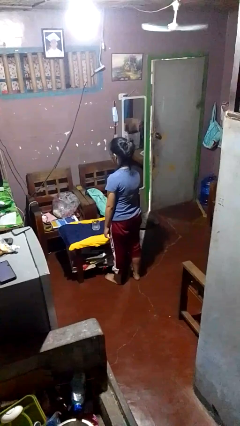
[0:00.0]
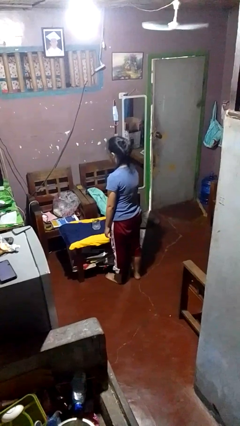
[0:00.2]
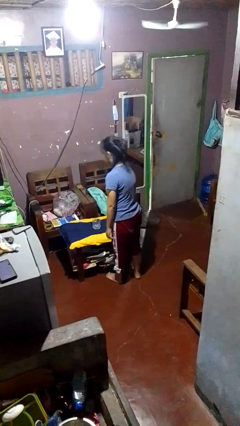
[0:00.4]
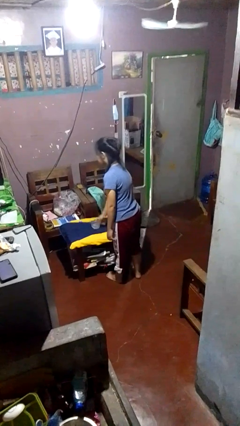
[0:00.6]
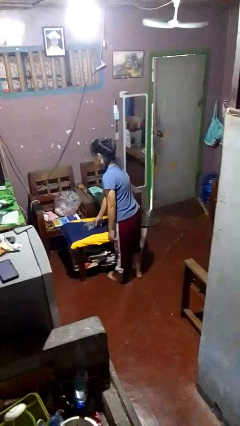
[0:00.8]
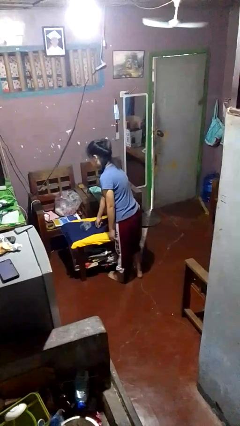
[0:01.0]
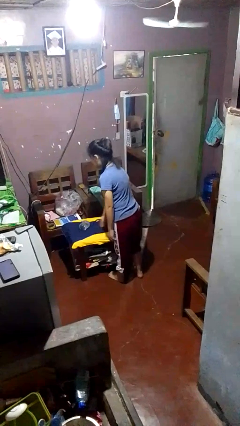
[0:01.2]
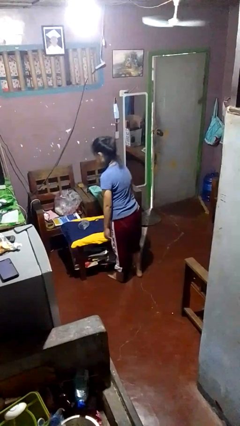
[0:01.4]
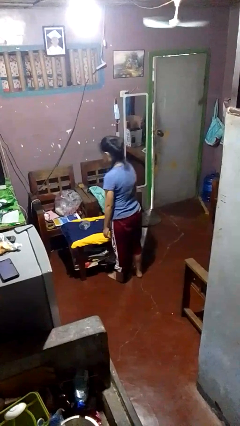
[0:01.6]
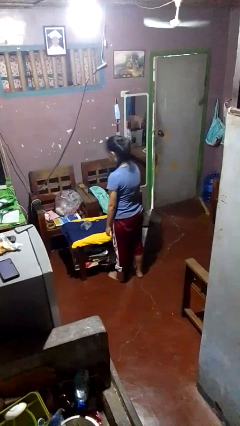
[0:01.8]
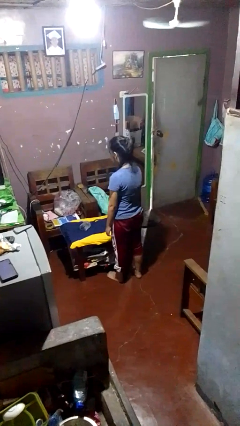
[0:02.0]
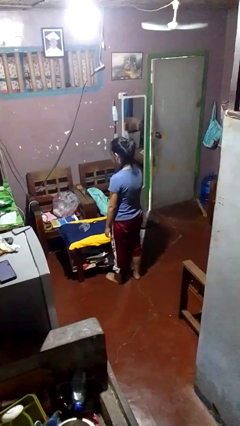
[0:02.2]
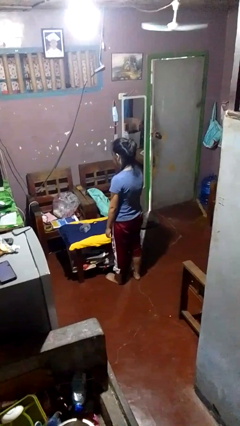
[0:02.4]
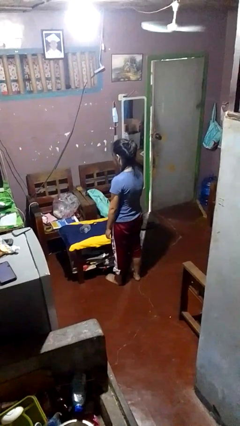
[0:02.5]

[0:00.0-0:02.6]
person knocks over glass

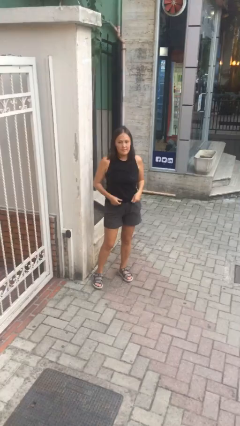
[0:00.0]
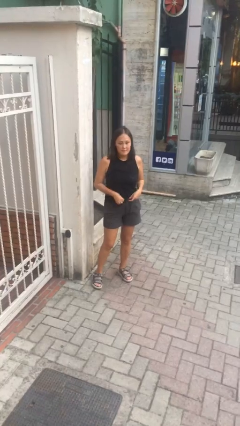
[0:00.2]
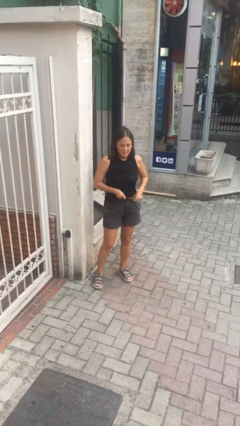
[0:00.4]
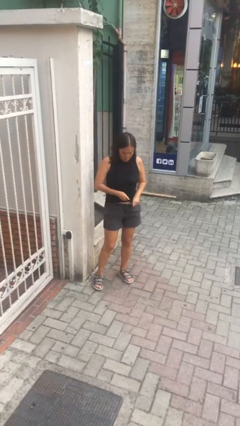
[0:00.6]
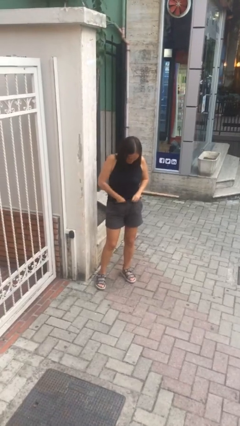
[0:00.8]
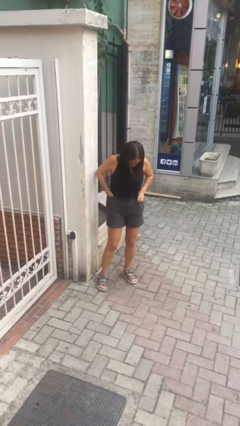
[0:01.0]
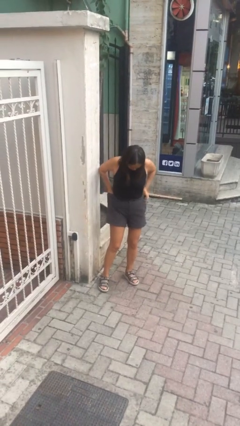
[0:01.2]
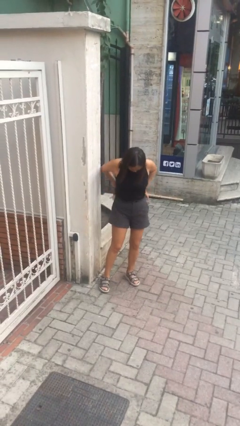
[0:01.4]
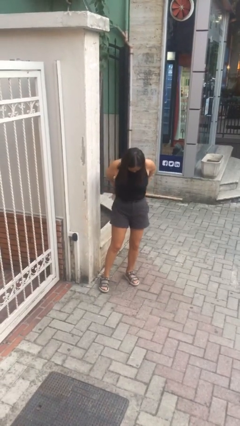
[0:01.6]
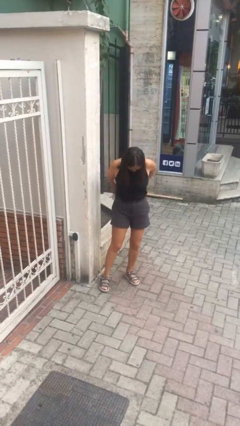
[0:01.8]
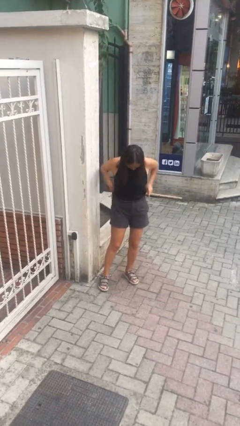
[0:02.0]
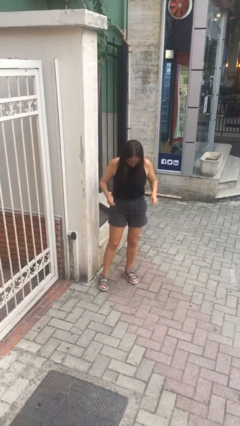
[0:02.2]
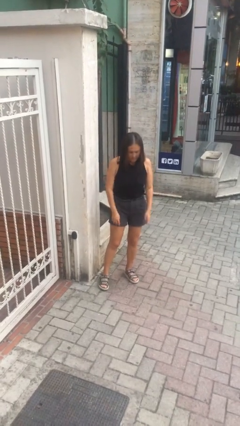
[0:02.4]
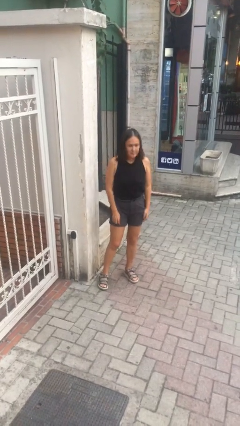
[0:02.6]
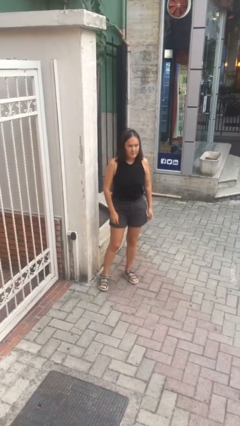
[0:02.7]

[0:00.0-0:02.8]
person tucks in shirt

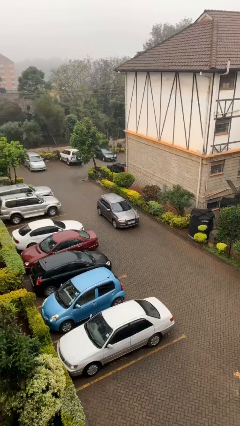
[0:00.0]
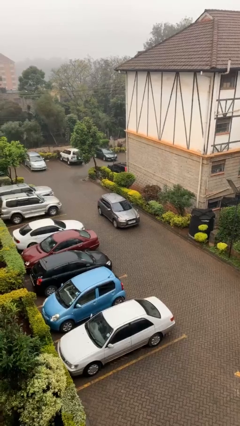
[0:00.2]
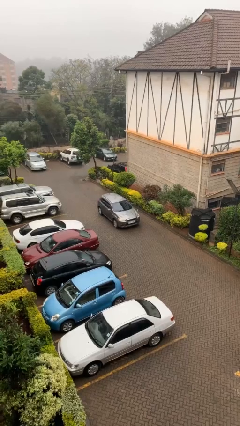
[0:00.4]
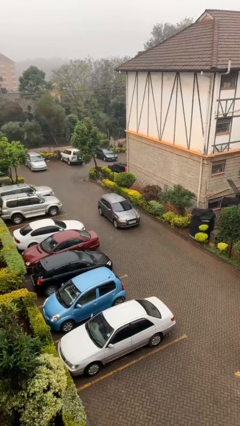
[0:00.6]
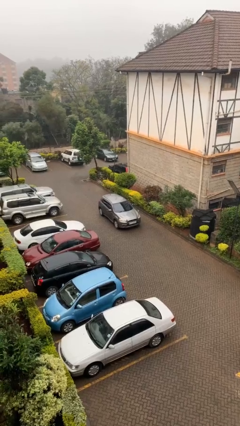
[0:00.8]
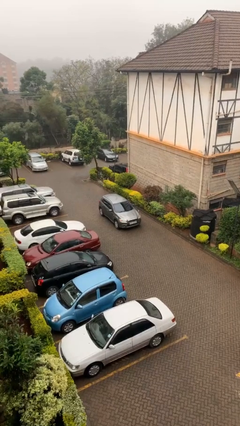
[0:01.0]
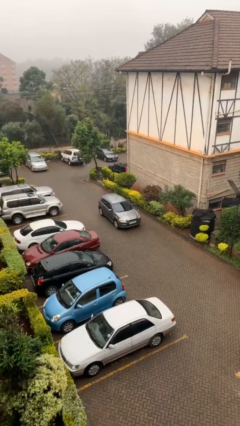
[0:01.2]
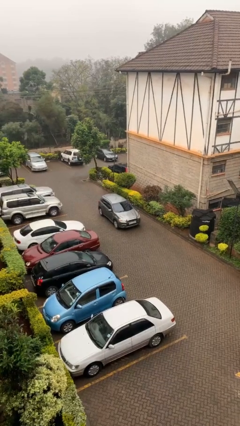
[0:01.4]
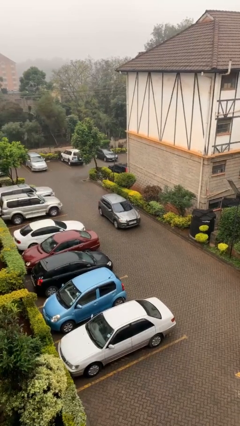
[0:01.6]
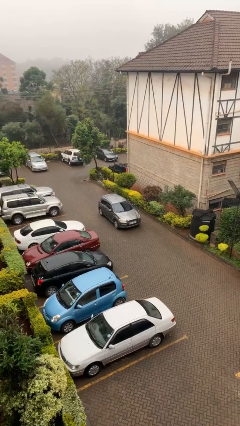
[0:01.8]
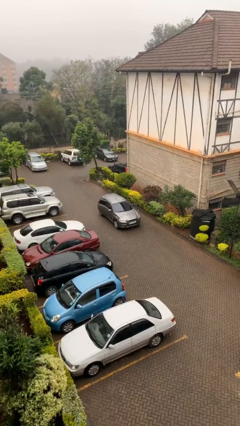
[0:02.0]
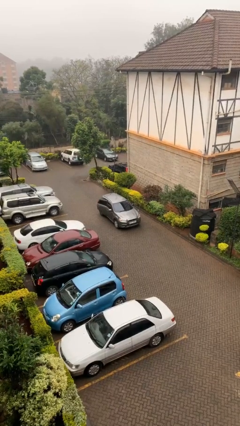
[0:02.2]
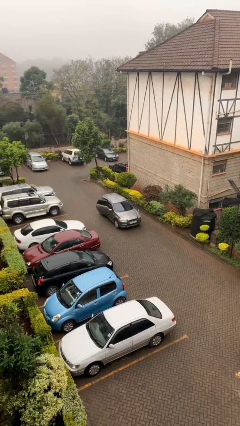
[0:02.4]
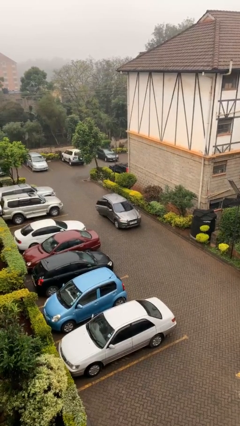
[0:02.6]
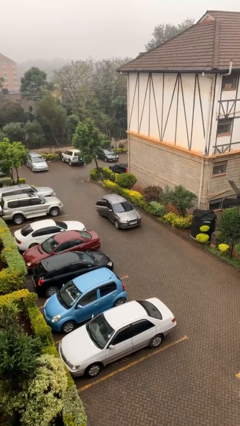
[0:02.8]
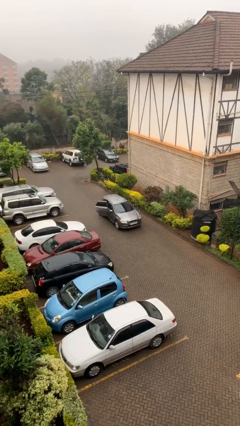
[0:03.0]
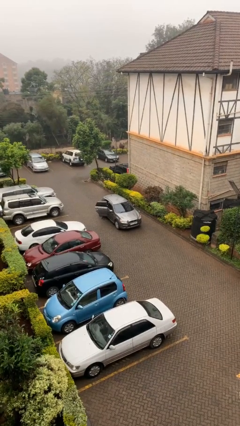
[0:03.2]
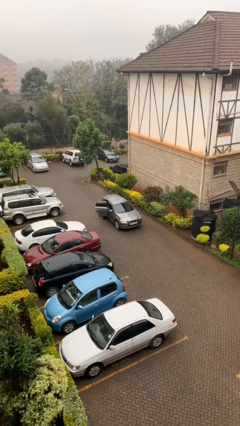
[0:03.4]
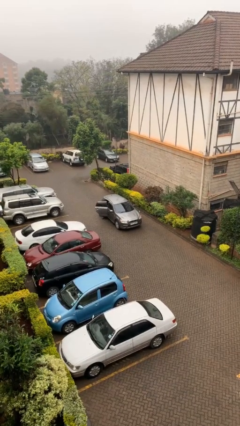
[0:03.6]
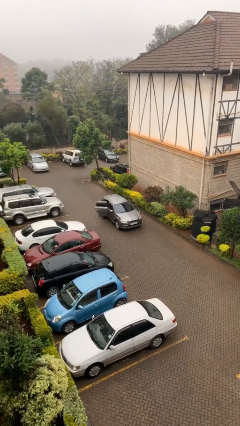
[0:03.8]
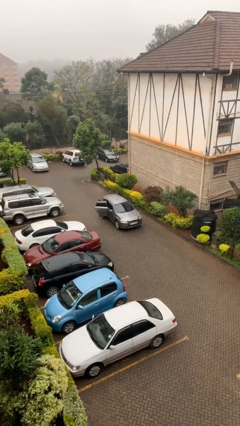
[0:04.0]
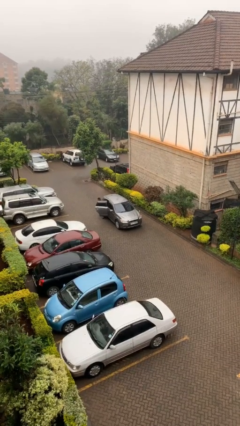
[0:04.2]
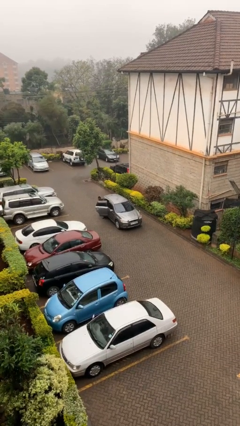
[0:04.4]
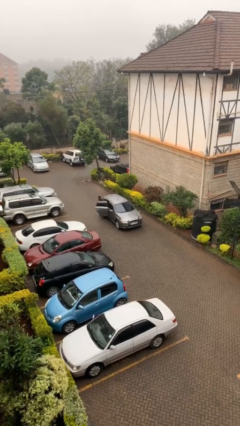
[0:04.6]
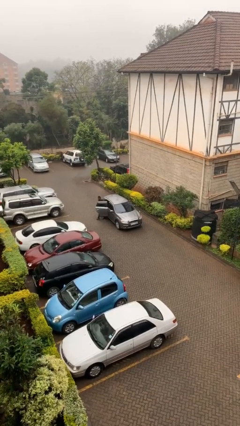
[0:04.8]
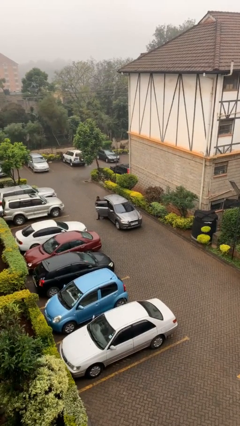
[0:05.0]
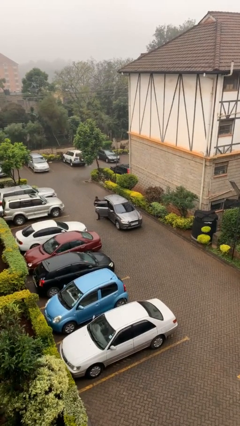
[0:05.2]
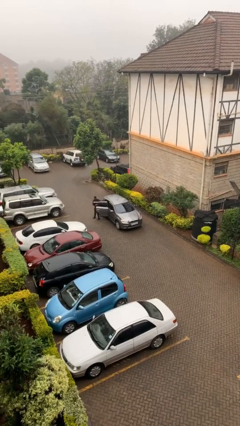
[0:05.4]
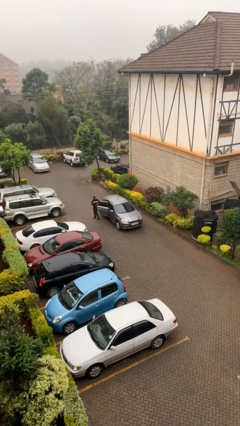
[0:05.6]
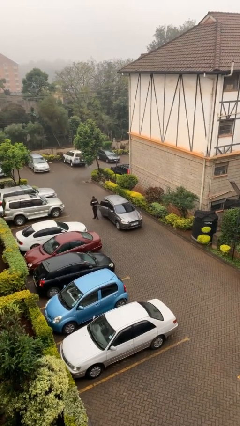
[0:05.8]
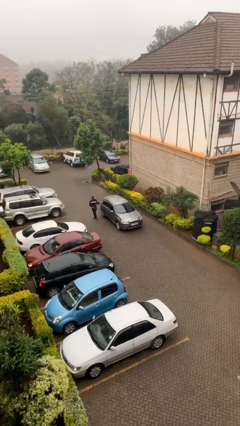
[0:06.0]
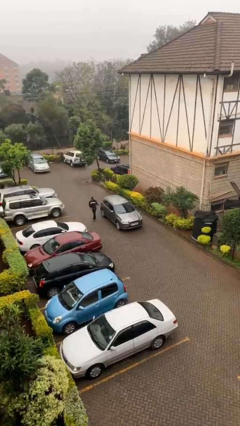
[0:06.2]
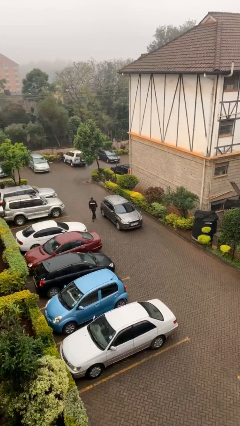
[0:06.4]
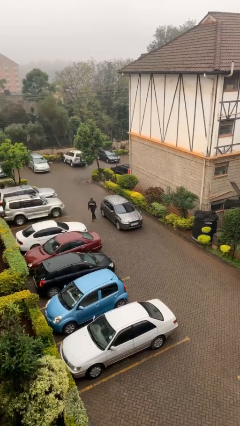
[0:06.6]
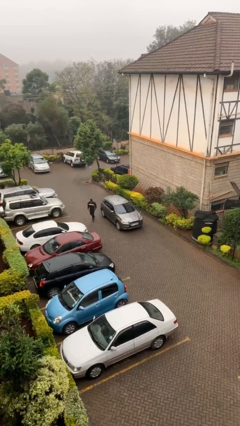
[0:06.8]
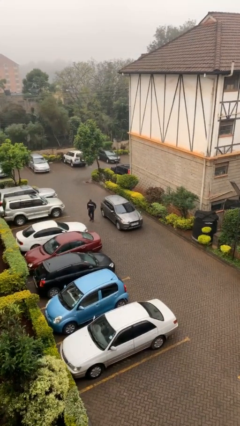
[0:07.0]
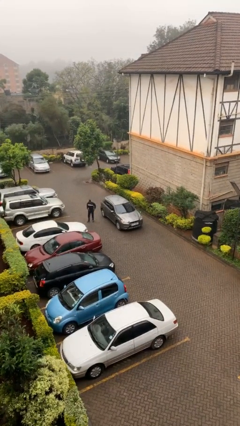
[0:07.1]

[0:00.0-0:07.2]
car drops off person

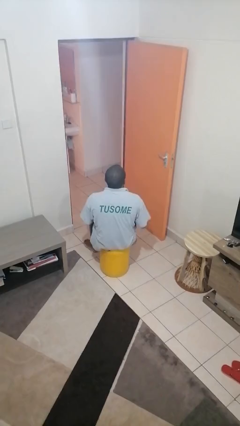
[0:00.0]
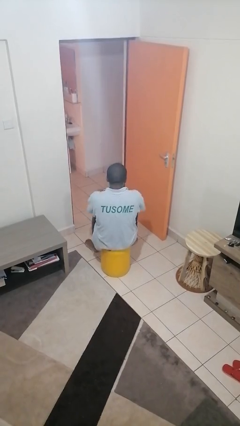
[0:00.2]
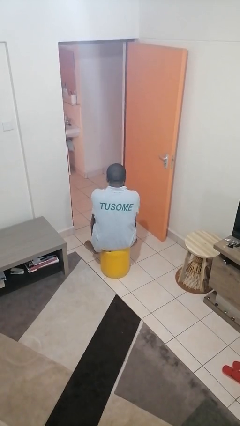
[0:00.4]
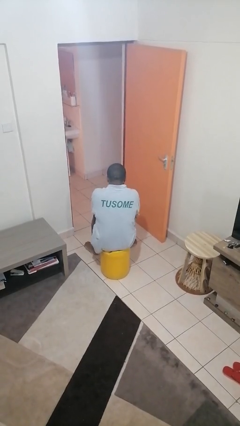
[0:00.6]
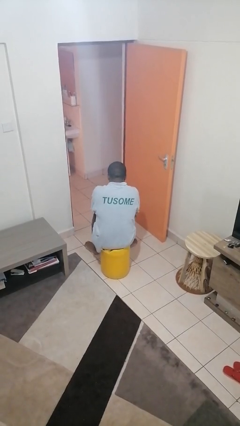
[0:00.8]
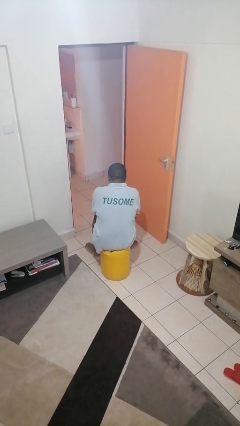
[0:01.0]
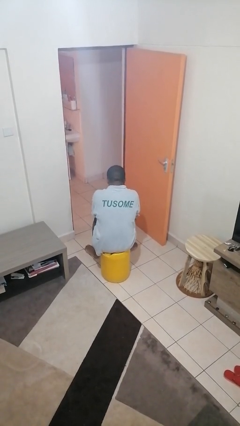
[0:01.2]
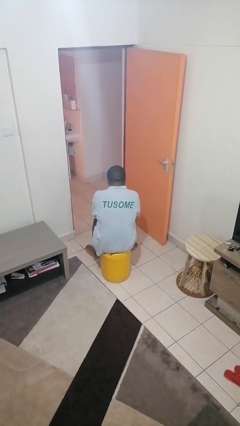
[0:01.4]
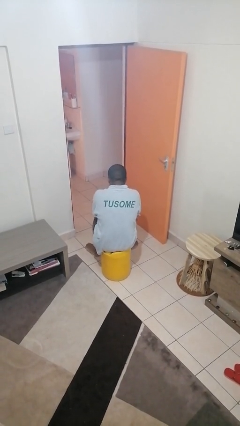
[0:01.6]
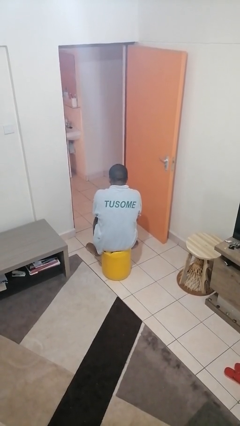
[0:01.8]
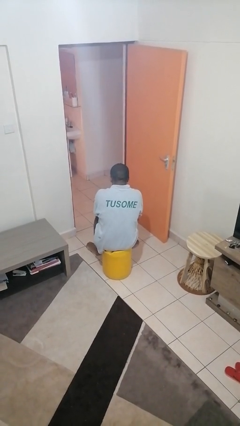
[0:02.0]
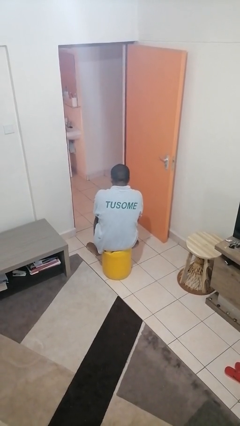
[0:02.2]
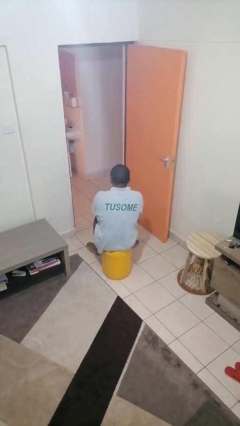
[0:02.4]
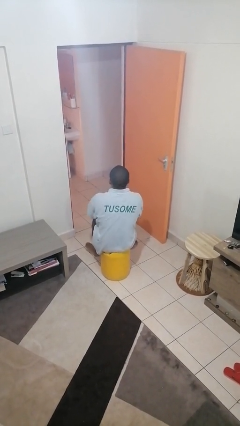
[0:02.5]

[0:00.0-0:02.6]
person crosses arms

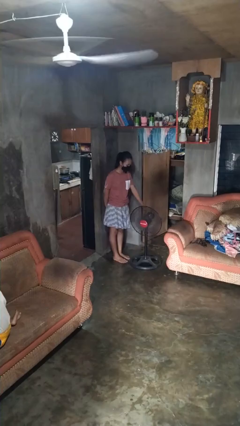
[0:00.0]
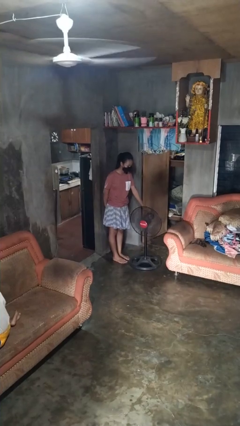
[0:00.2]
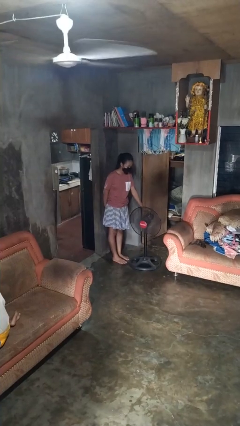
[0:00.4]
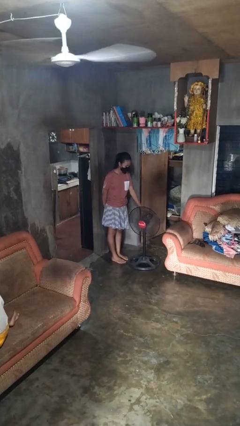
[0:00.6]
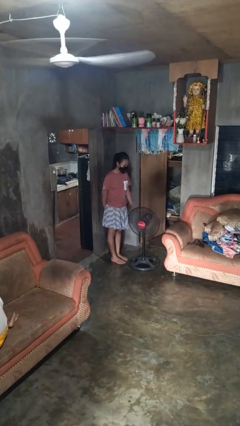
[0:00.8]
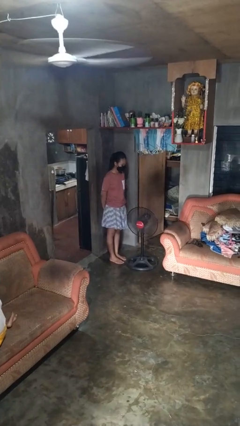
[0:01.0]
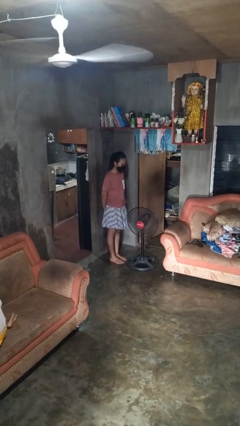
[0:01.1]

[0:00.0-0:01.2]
person turns off fan

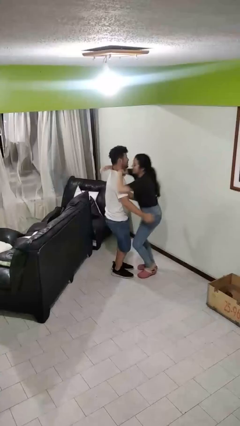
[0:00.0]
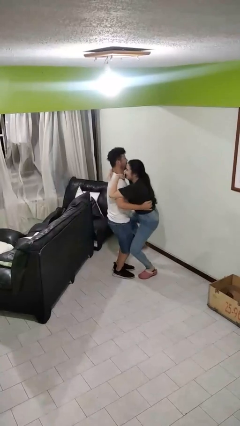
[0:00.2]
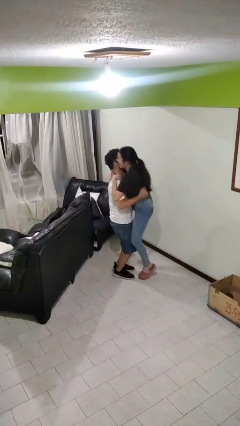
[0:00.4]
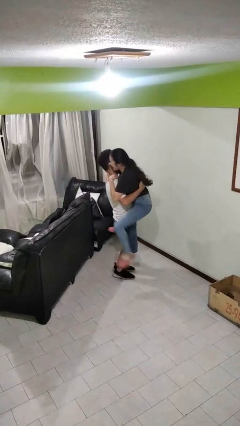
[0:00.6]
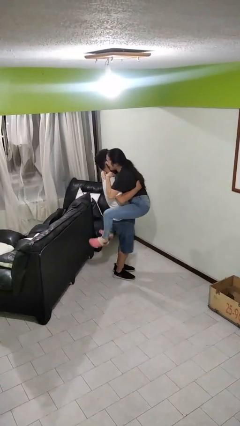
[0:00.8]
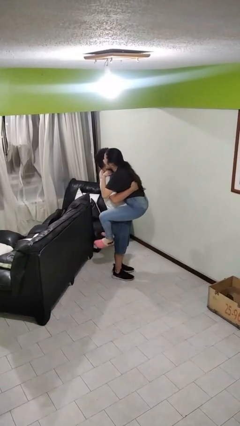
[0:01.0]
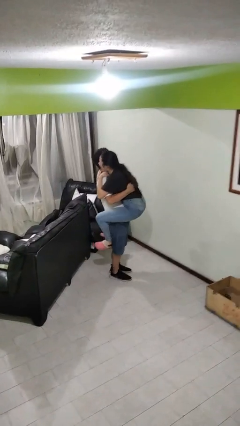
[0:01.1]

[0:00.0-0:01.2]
person picks up person
